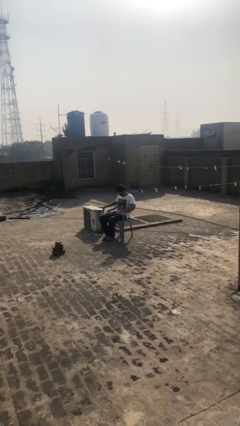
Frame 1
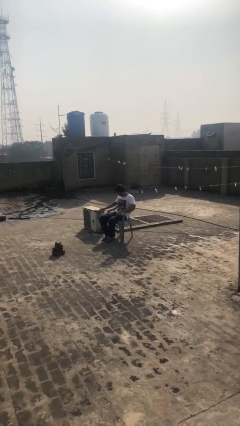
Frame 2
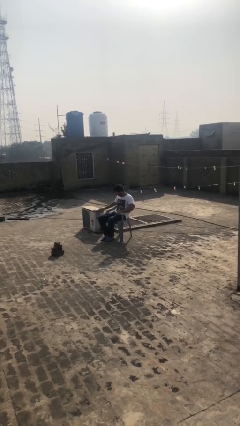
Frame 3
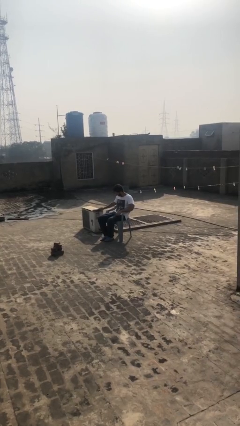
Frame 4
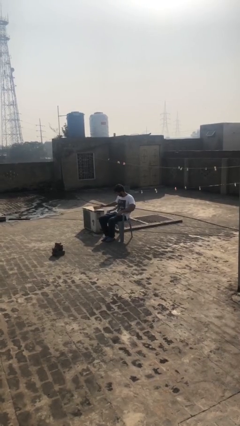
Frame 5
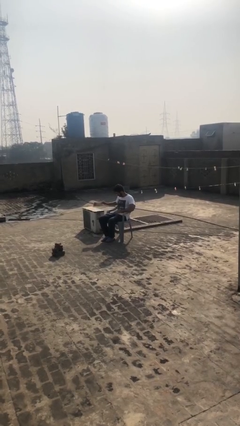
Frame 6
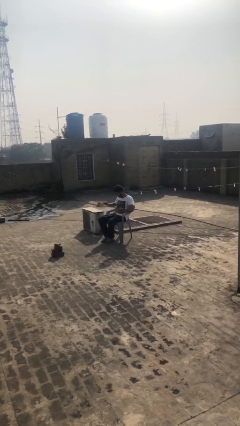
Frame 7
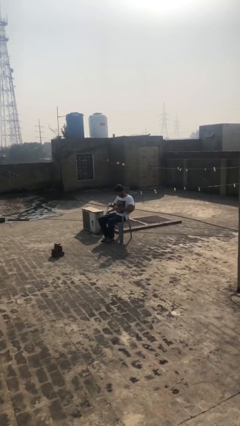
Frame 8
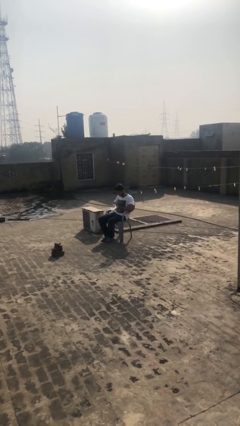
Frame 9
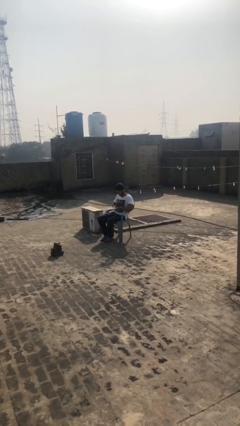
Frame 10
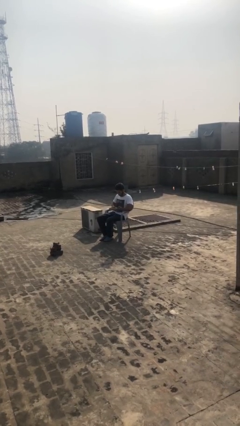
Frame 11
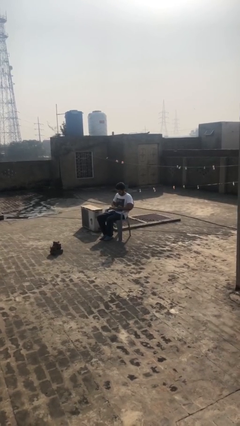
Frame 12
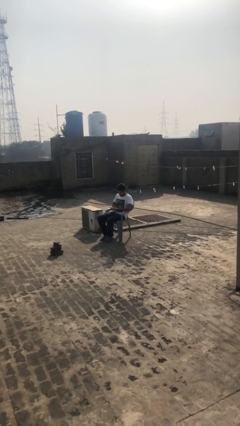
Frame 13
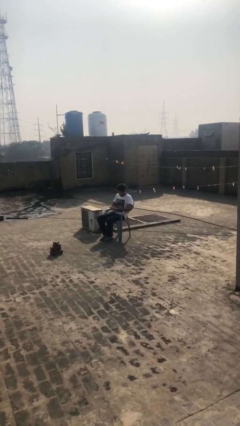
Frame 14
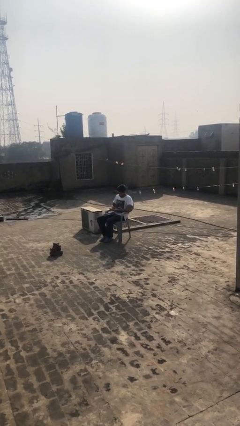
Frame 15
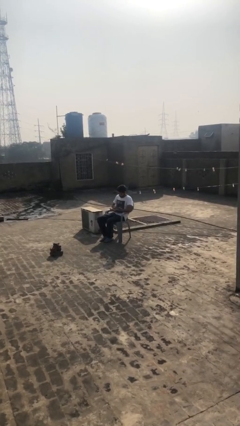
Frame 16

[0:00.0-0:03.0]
person picks up object from table

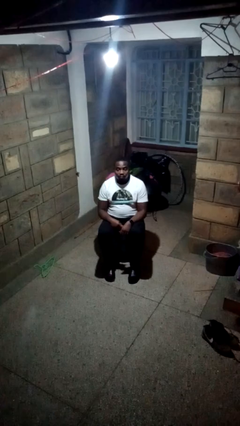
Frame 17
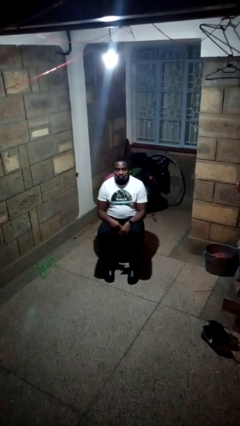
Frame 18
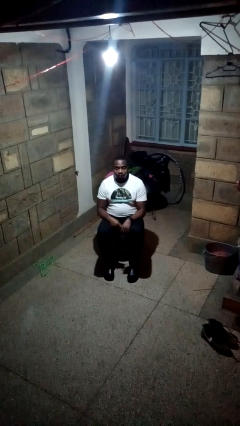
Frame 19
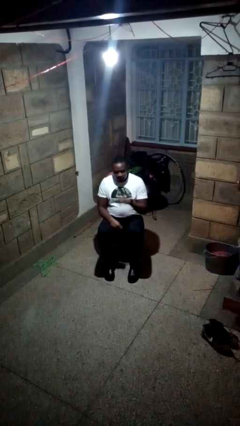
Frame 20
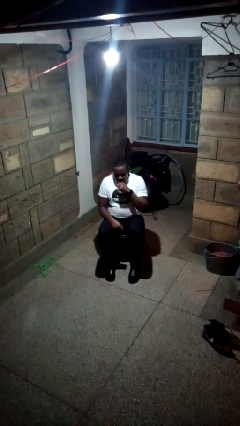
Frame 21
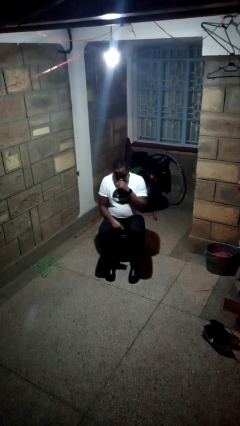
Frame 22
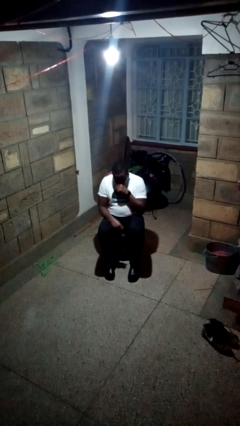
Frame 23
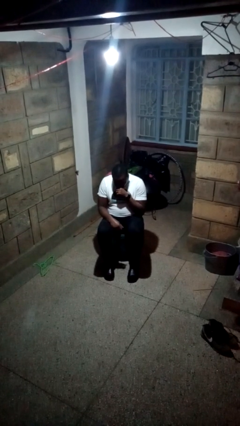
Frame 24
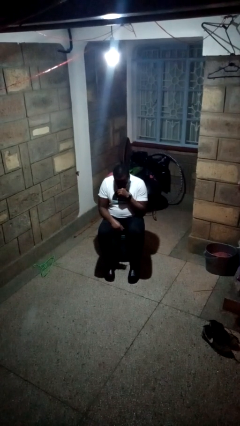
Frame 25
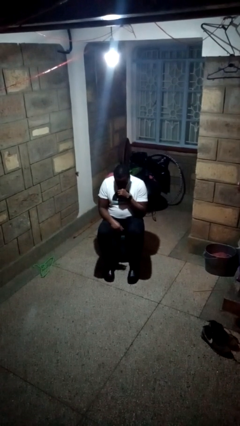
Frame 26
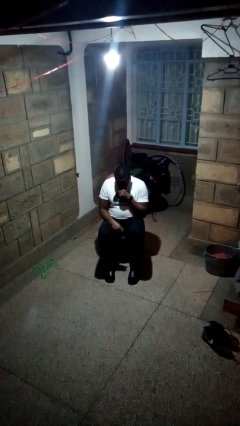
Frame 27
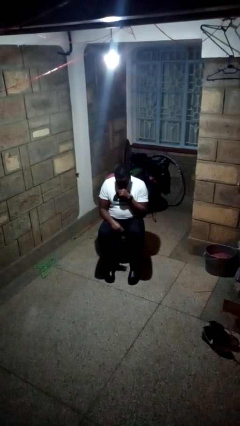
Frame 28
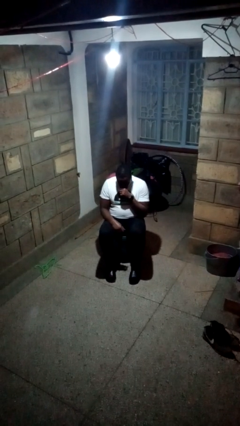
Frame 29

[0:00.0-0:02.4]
person sneezes into hand

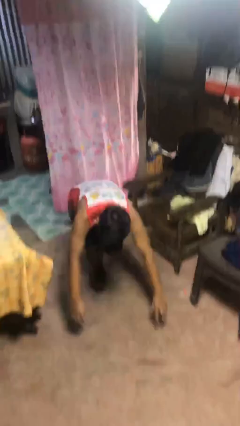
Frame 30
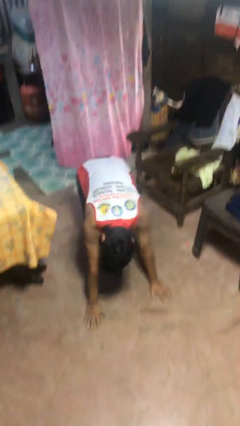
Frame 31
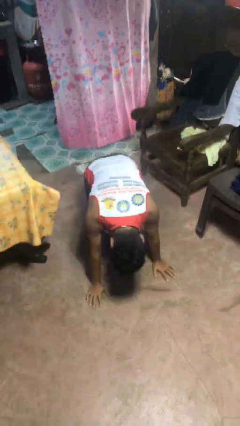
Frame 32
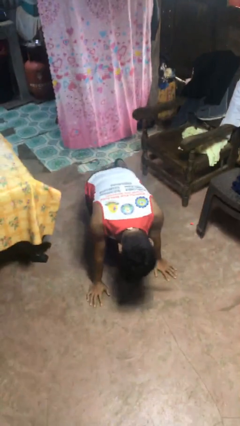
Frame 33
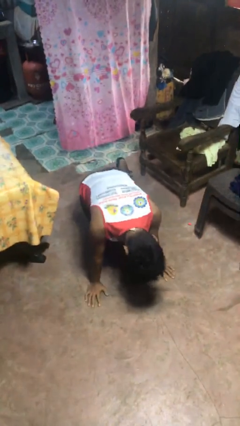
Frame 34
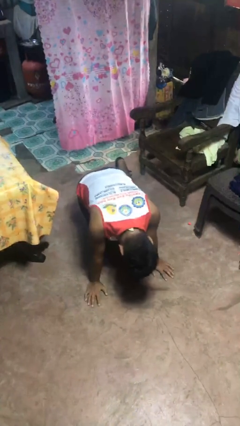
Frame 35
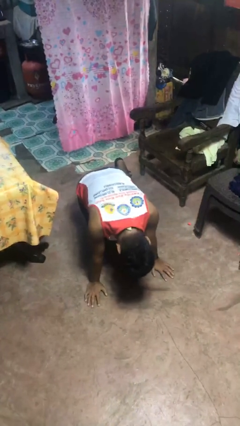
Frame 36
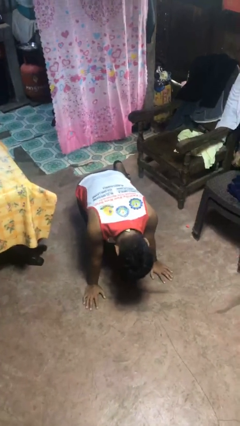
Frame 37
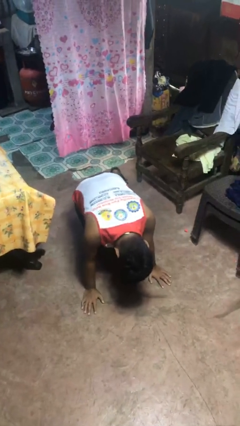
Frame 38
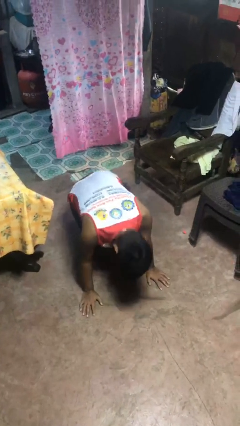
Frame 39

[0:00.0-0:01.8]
person lies down on floor

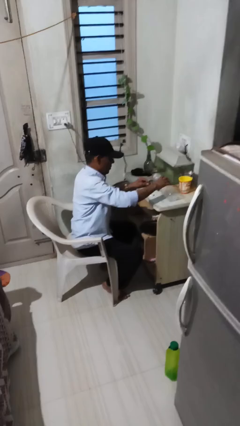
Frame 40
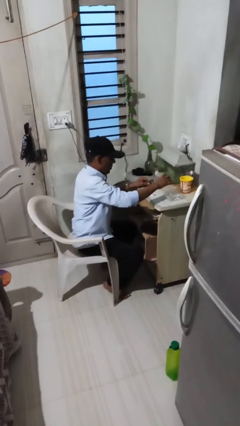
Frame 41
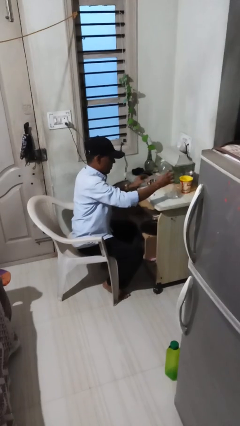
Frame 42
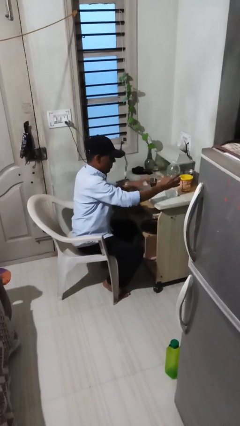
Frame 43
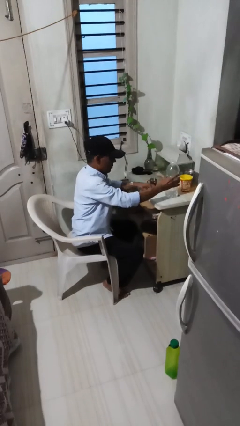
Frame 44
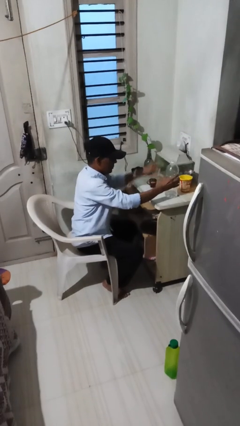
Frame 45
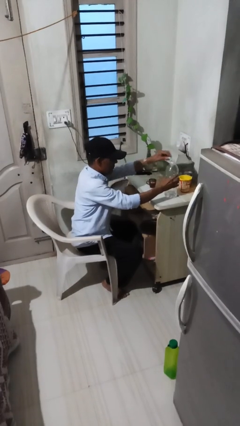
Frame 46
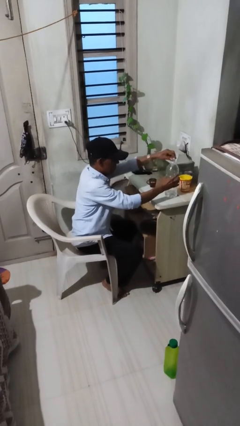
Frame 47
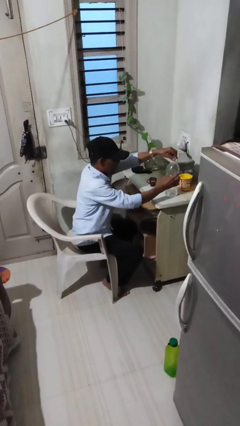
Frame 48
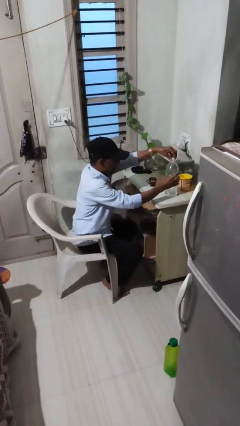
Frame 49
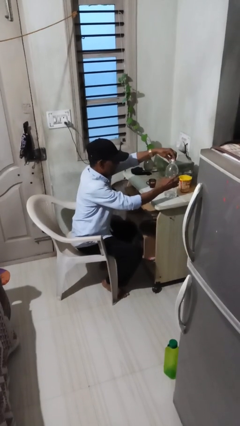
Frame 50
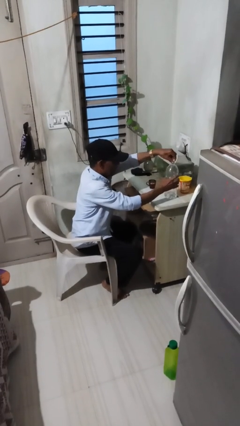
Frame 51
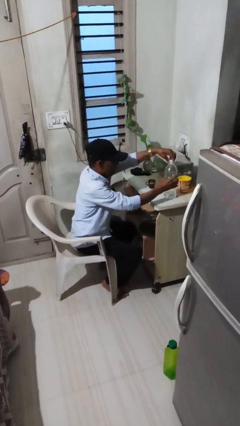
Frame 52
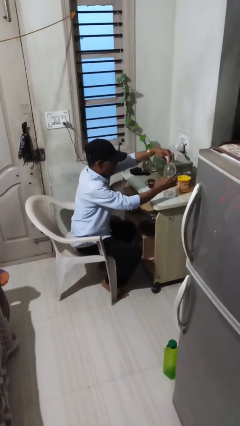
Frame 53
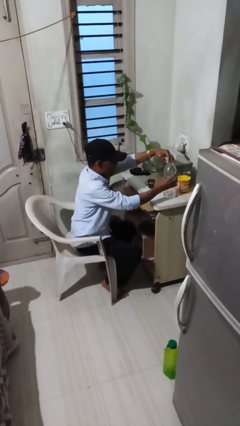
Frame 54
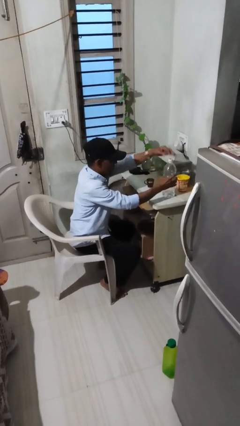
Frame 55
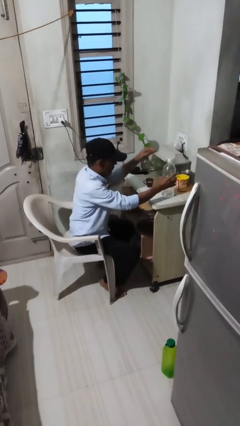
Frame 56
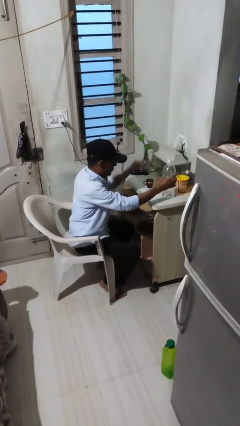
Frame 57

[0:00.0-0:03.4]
person screws lid to bottle

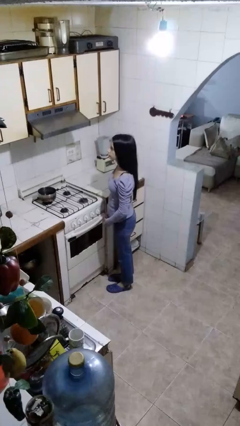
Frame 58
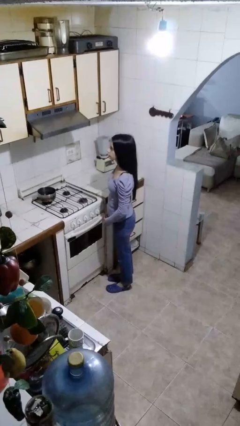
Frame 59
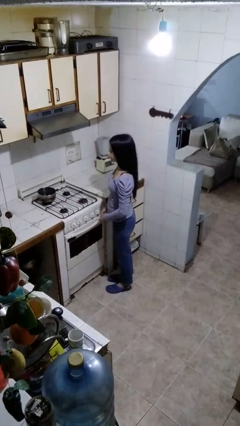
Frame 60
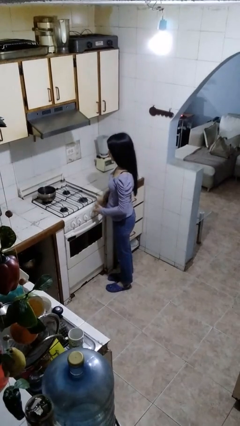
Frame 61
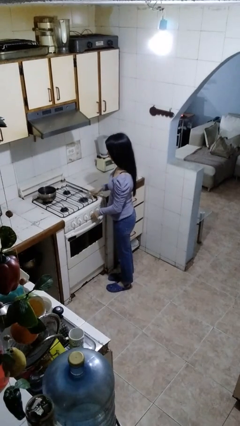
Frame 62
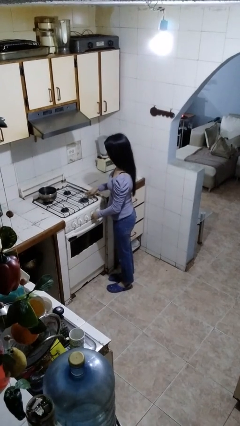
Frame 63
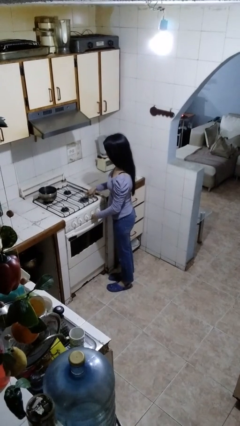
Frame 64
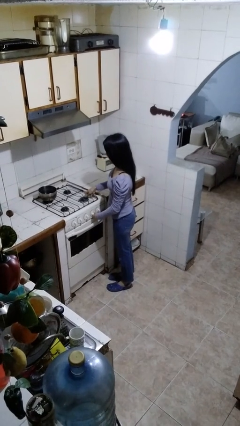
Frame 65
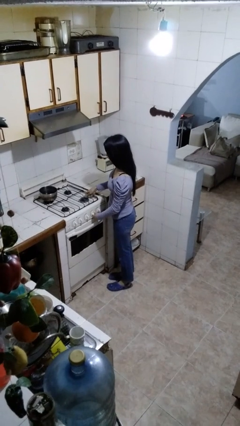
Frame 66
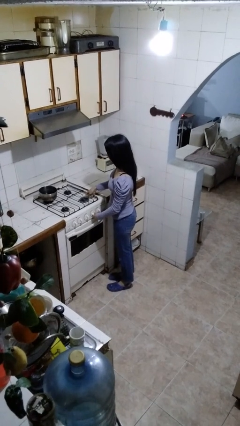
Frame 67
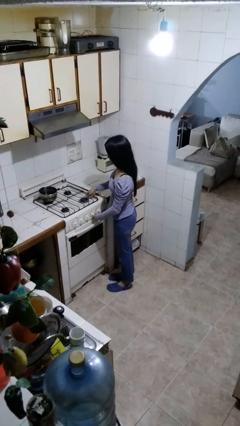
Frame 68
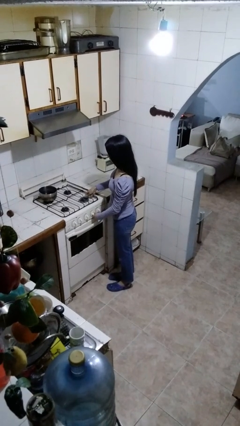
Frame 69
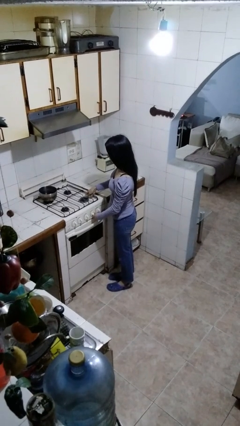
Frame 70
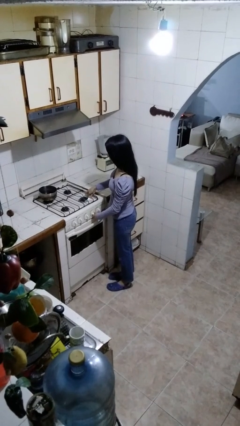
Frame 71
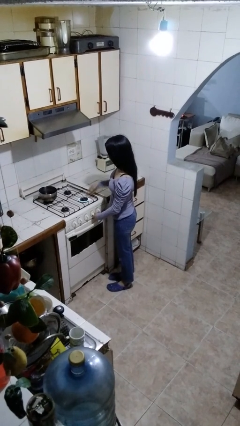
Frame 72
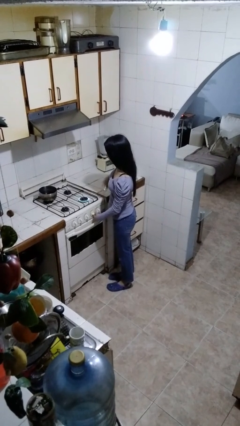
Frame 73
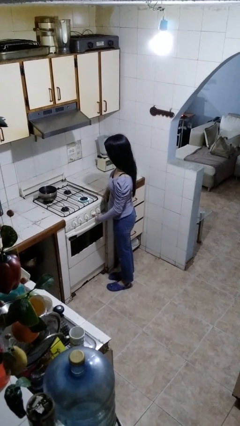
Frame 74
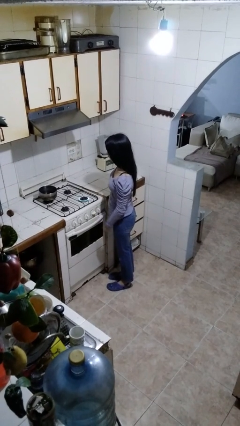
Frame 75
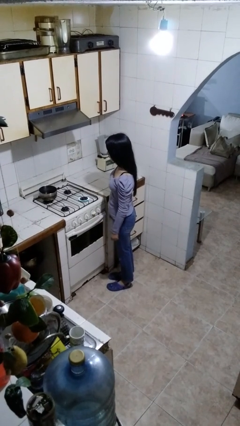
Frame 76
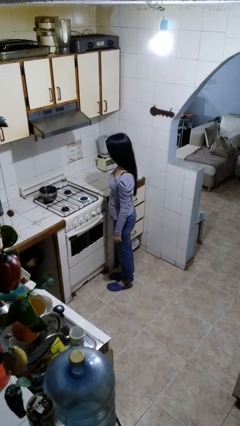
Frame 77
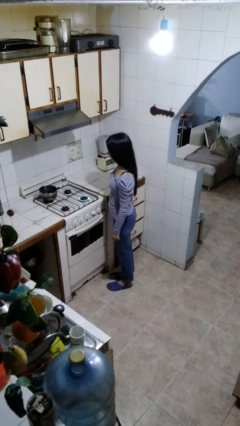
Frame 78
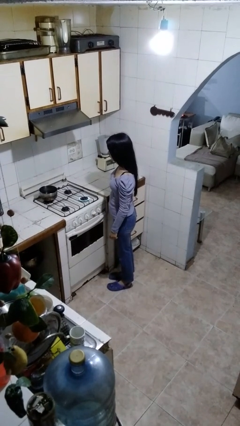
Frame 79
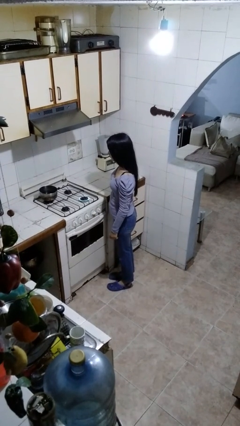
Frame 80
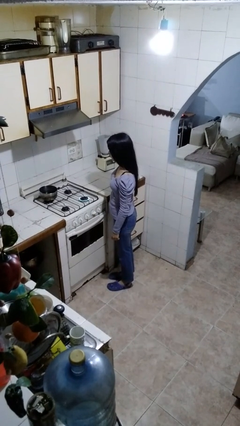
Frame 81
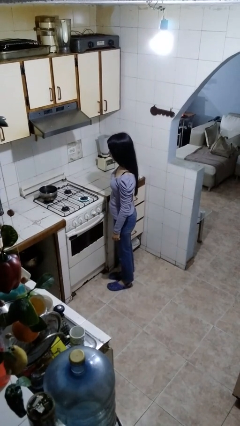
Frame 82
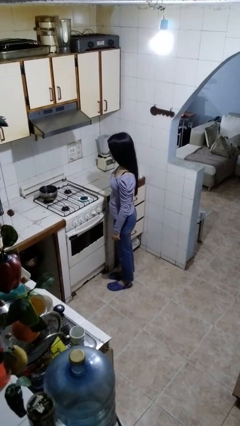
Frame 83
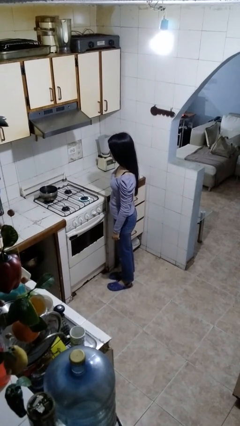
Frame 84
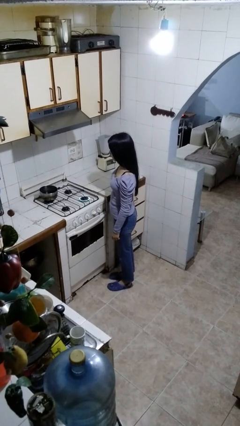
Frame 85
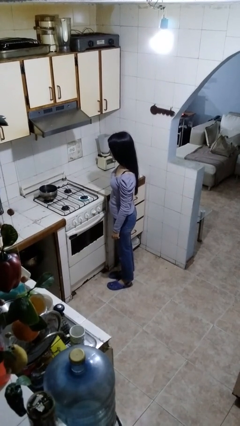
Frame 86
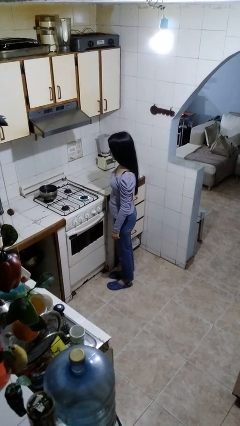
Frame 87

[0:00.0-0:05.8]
person turns on stovetop

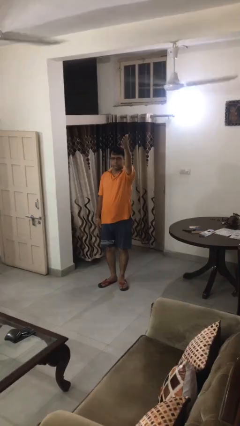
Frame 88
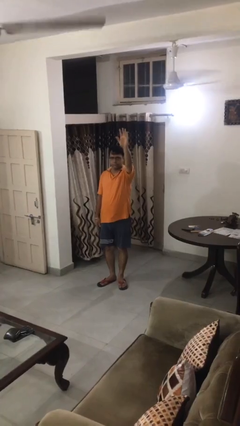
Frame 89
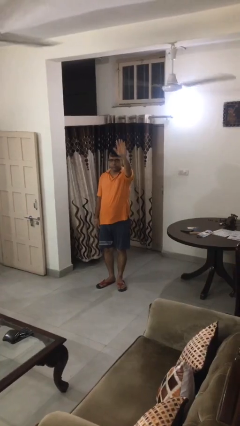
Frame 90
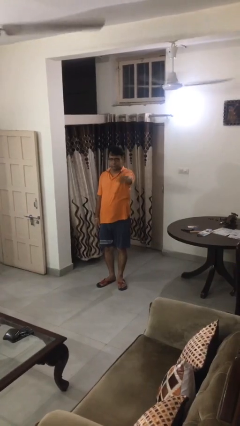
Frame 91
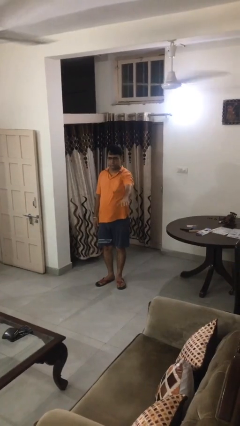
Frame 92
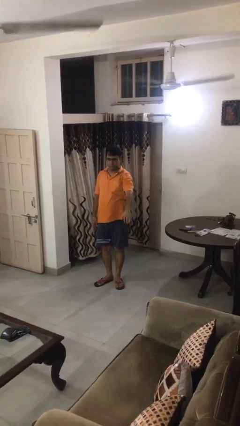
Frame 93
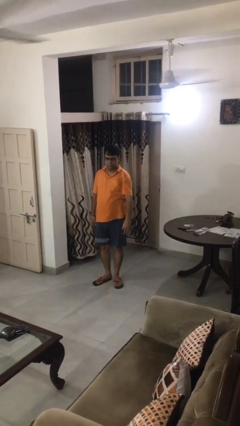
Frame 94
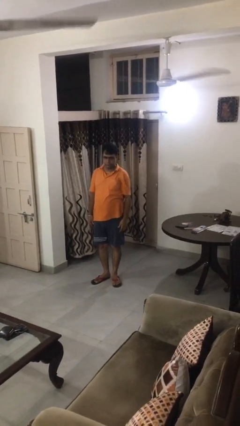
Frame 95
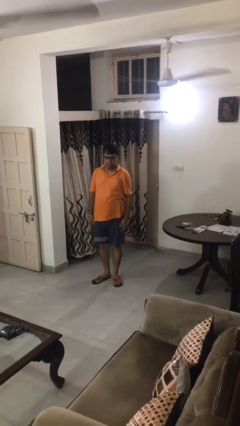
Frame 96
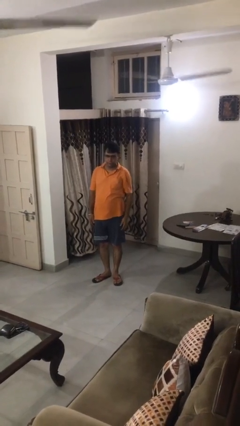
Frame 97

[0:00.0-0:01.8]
person gestures swipe down
